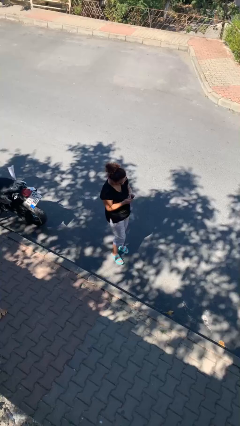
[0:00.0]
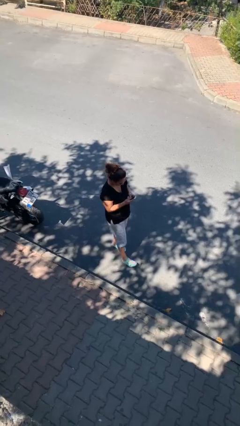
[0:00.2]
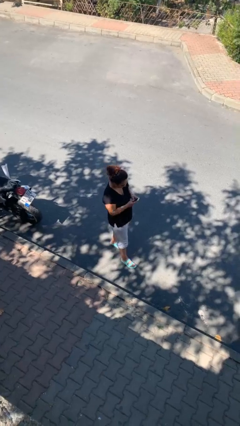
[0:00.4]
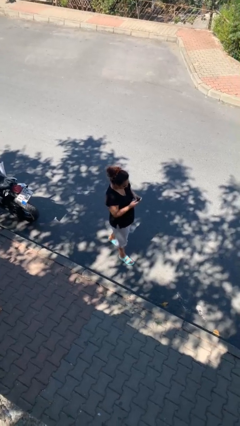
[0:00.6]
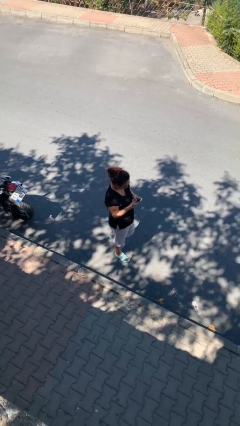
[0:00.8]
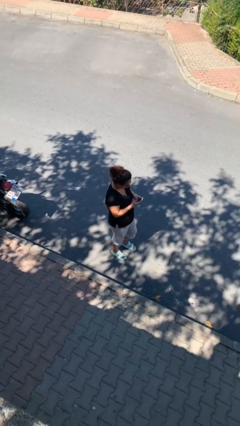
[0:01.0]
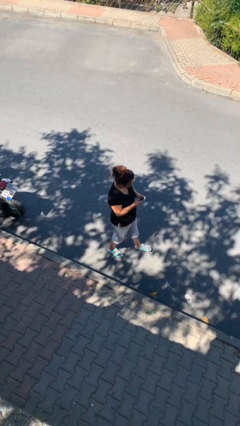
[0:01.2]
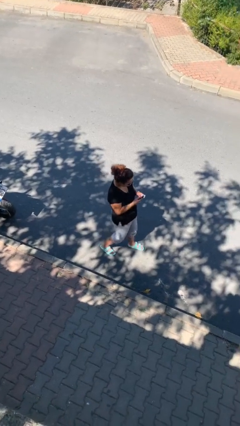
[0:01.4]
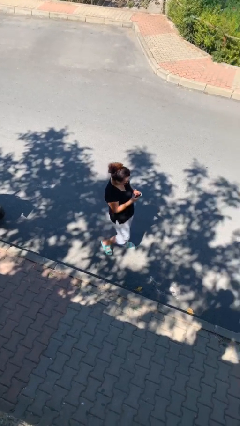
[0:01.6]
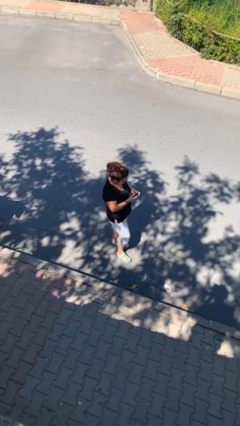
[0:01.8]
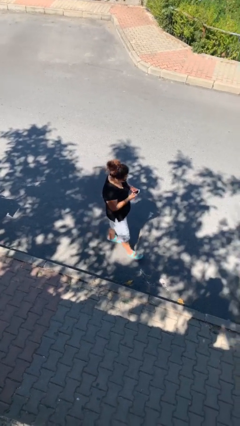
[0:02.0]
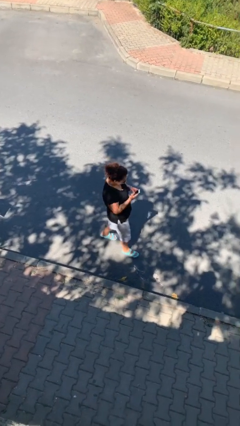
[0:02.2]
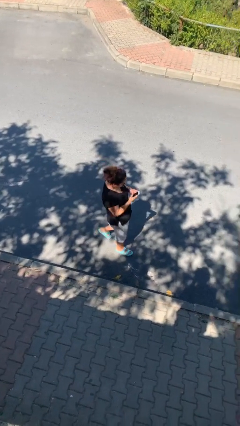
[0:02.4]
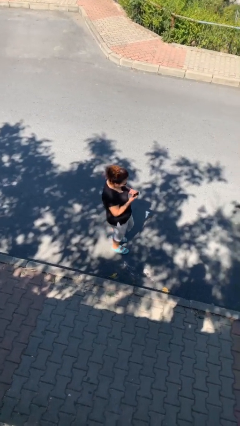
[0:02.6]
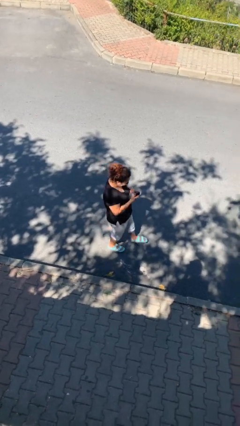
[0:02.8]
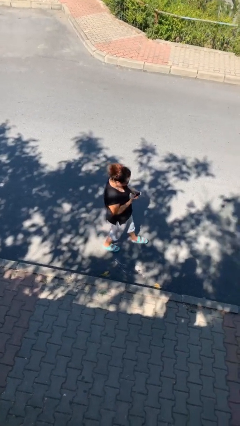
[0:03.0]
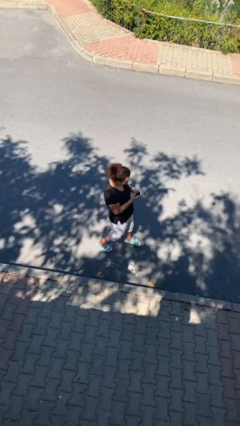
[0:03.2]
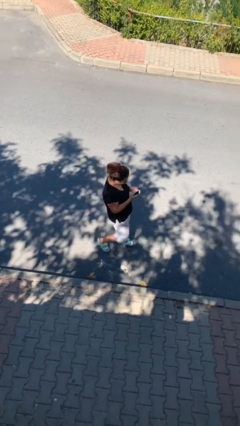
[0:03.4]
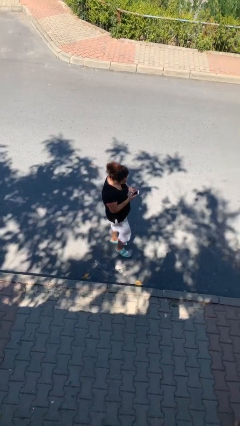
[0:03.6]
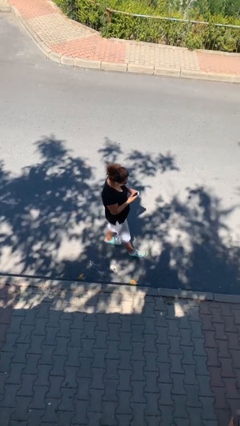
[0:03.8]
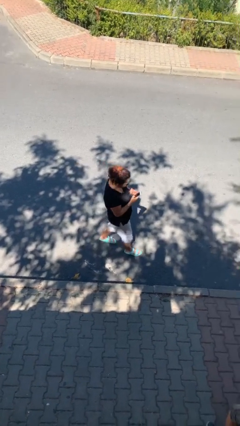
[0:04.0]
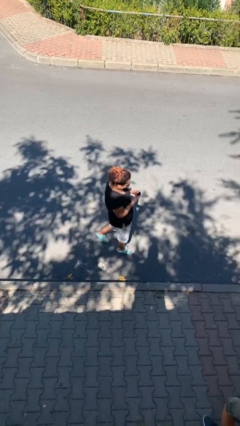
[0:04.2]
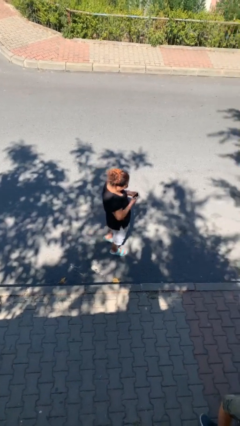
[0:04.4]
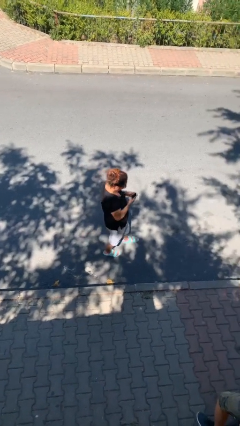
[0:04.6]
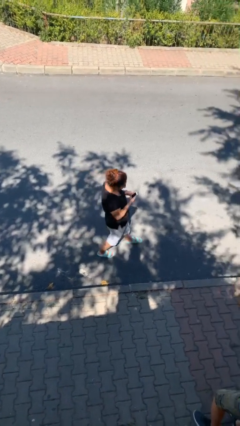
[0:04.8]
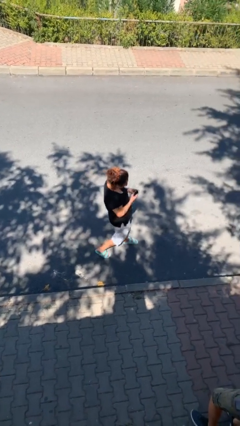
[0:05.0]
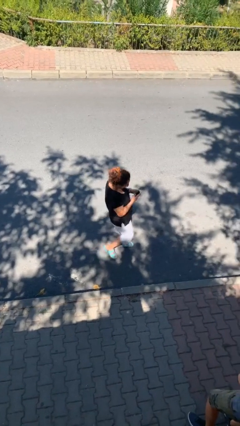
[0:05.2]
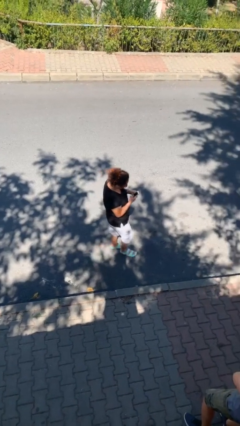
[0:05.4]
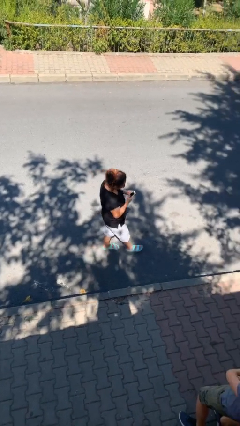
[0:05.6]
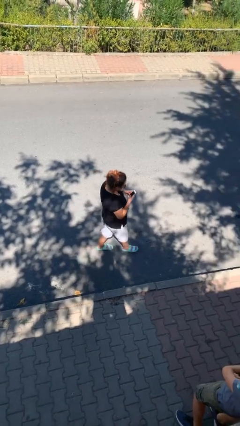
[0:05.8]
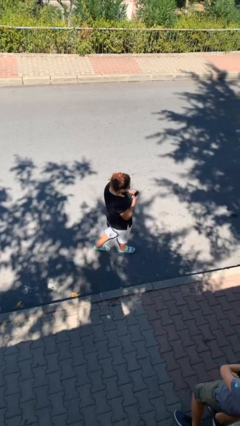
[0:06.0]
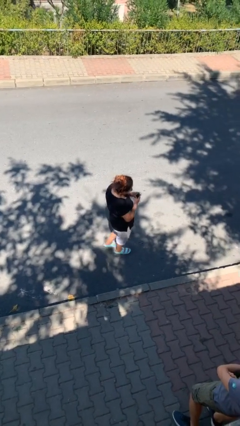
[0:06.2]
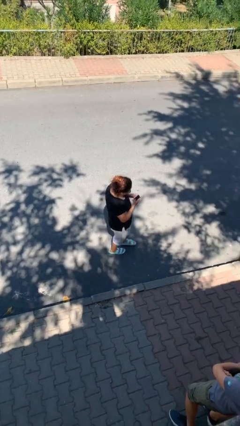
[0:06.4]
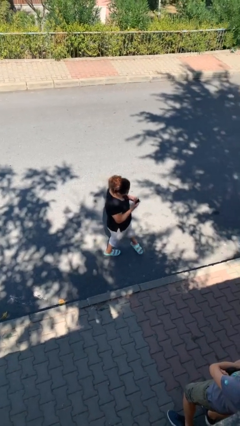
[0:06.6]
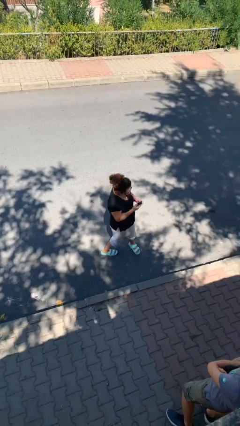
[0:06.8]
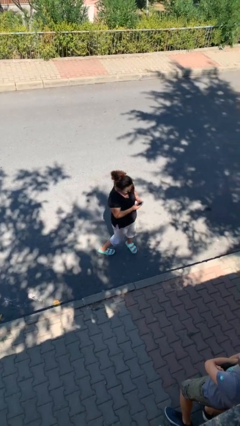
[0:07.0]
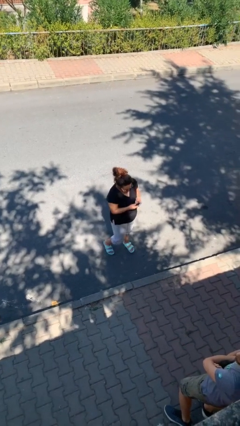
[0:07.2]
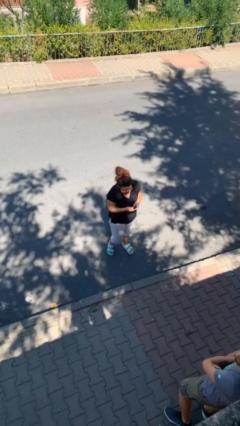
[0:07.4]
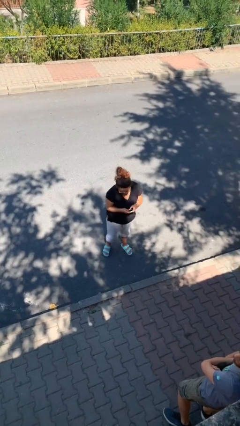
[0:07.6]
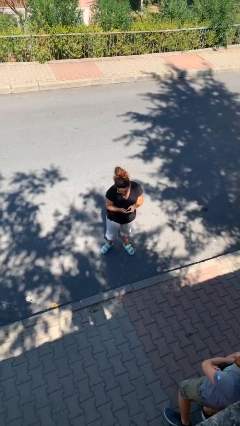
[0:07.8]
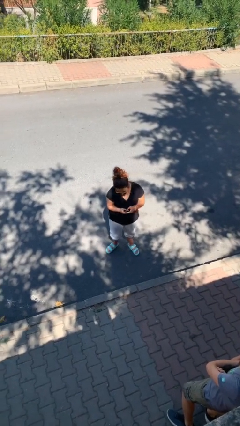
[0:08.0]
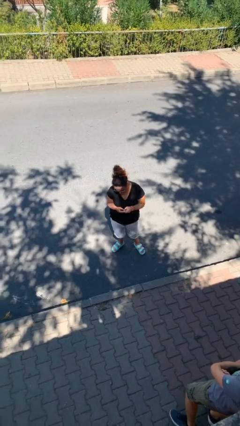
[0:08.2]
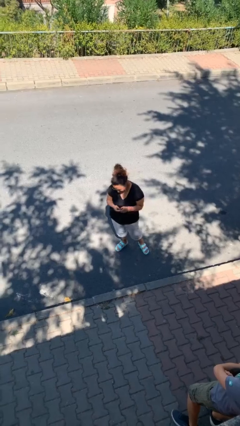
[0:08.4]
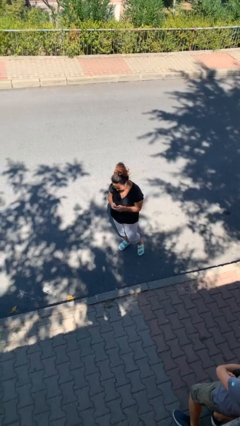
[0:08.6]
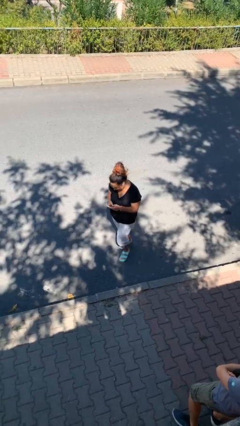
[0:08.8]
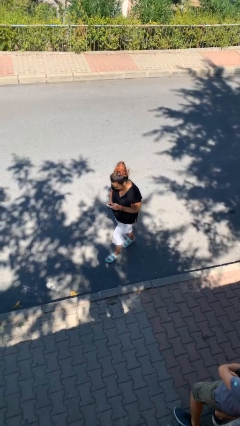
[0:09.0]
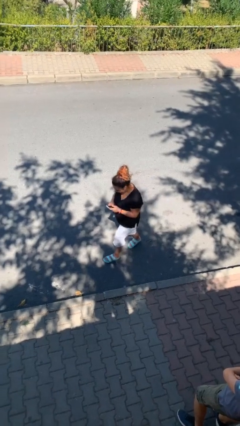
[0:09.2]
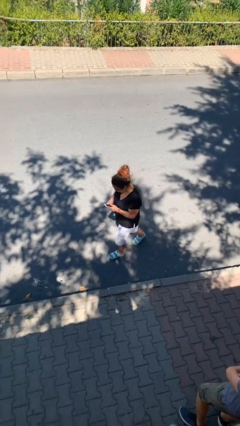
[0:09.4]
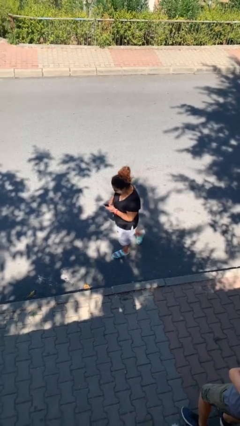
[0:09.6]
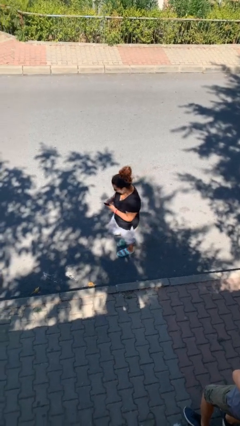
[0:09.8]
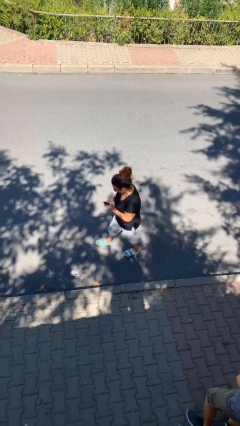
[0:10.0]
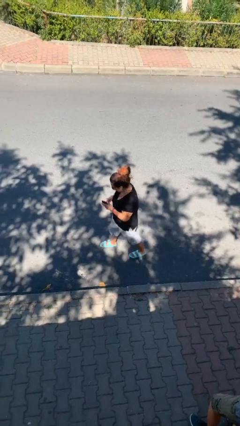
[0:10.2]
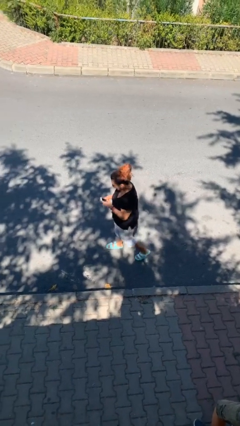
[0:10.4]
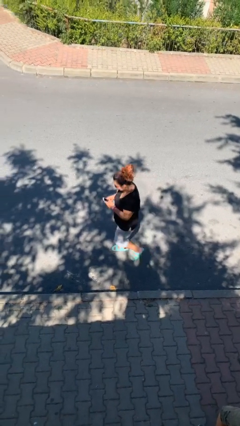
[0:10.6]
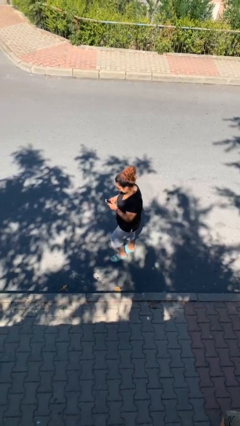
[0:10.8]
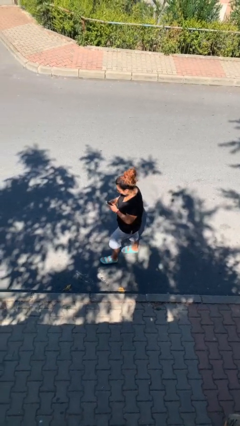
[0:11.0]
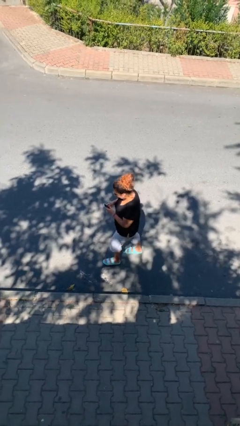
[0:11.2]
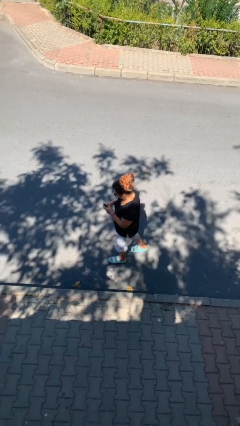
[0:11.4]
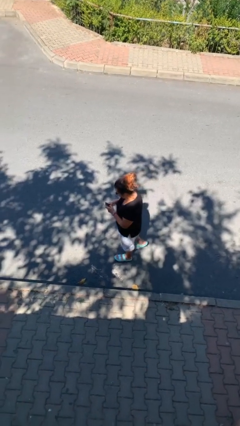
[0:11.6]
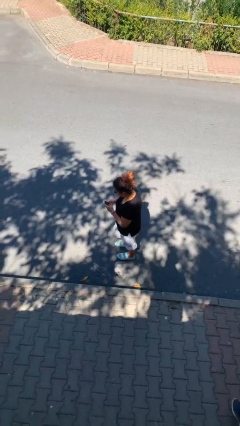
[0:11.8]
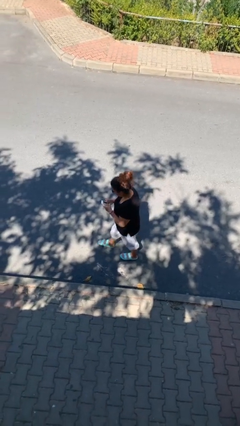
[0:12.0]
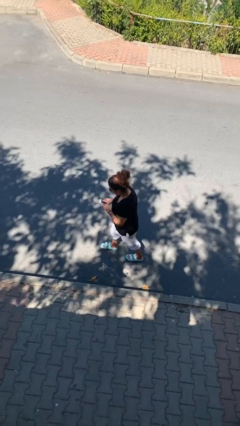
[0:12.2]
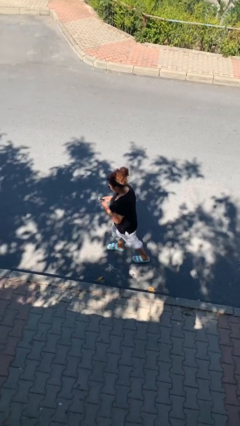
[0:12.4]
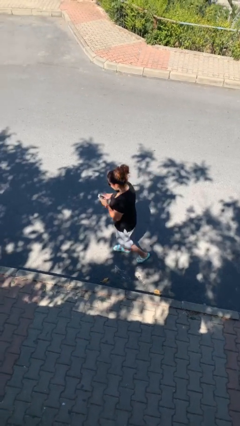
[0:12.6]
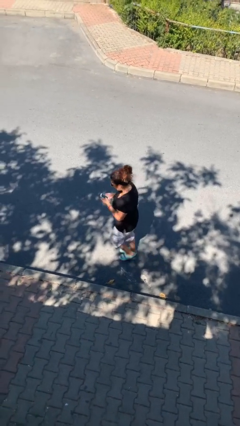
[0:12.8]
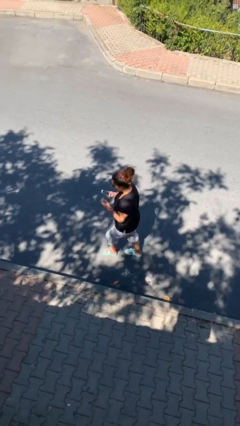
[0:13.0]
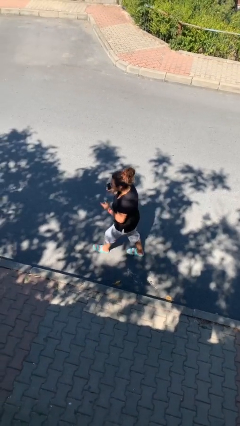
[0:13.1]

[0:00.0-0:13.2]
person texts on phone

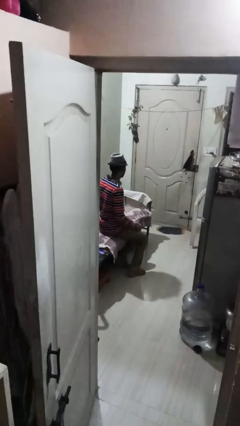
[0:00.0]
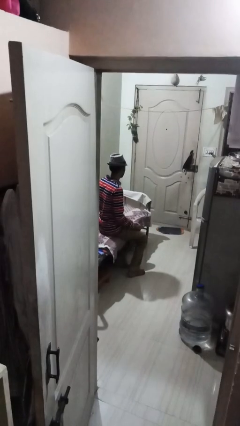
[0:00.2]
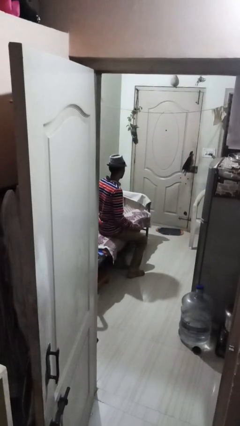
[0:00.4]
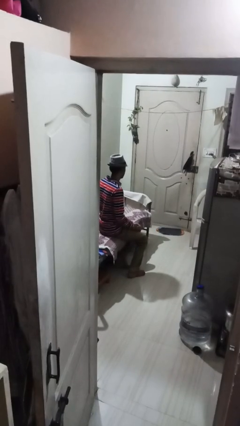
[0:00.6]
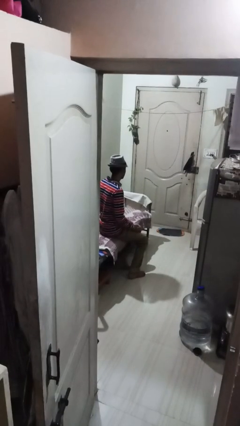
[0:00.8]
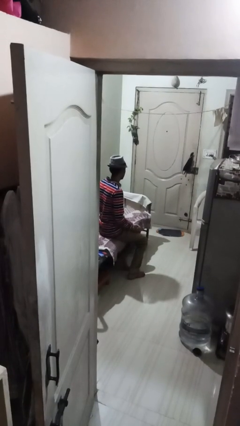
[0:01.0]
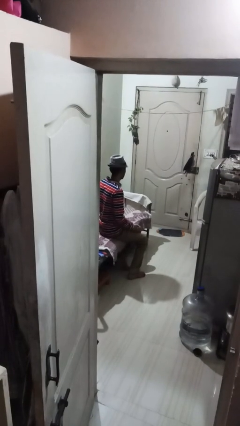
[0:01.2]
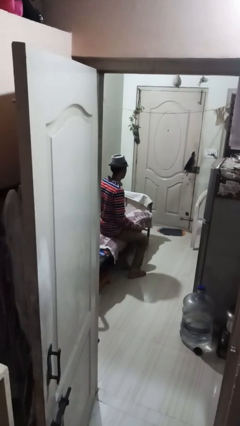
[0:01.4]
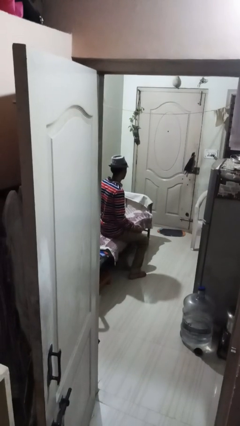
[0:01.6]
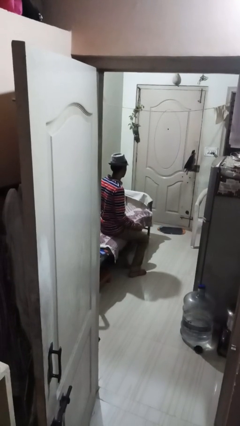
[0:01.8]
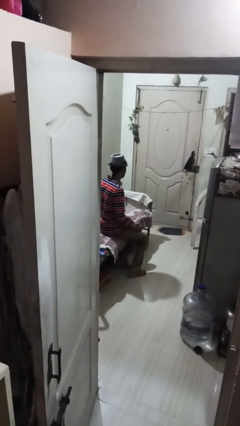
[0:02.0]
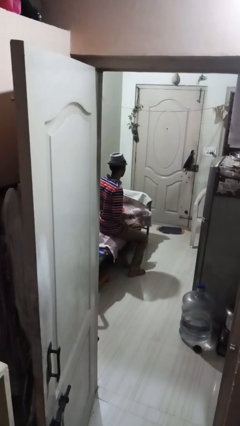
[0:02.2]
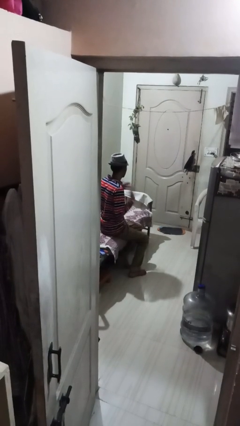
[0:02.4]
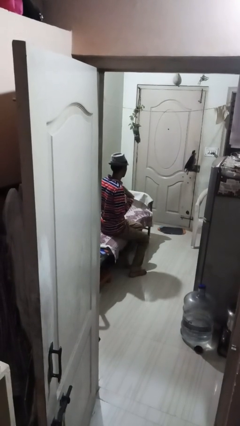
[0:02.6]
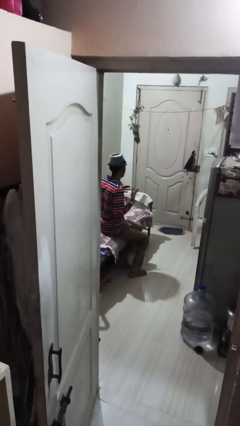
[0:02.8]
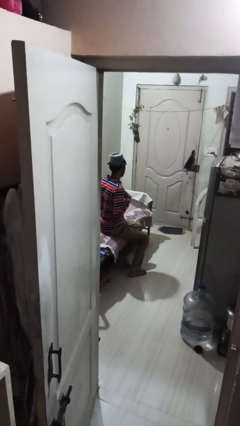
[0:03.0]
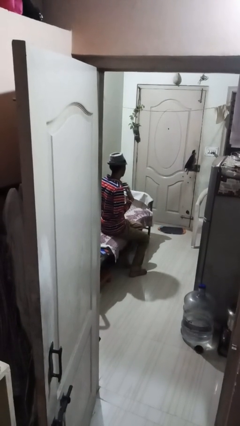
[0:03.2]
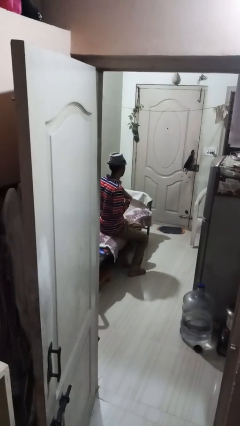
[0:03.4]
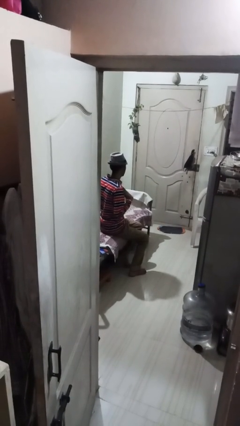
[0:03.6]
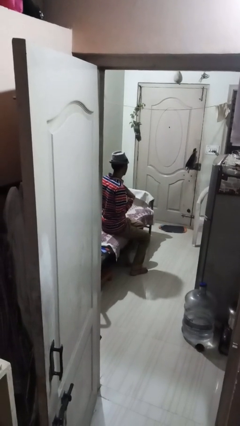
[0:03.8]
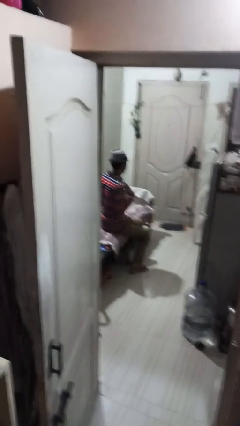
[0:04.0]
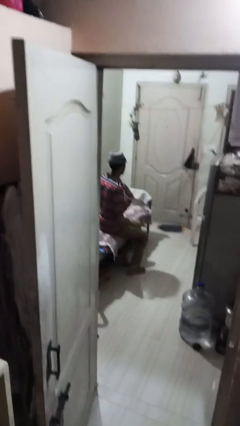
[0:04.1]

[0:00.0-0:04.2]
person drums on chest

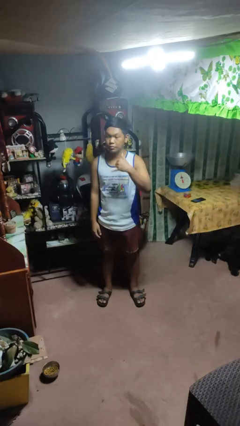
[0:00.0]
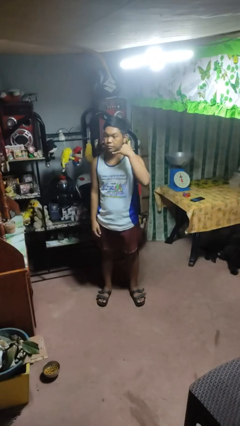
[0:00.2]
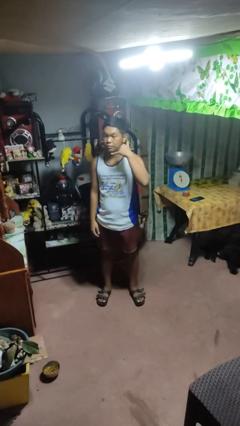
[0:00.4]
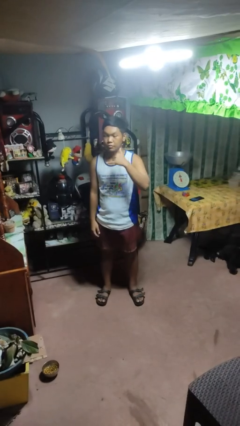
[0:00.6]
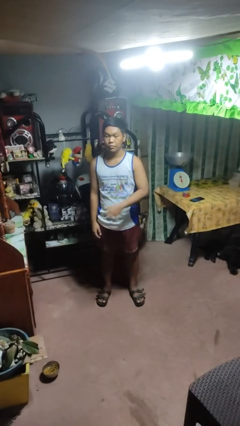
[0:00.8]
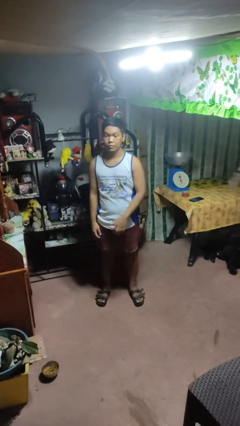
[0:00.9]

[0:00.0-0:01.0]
person gestures call me
